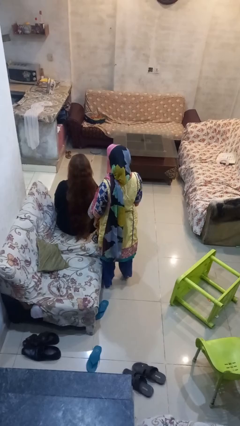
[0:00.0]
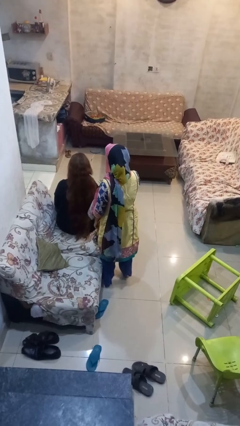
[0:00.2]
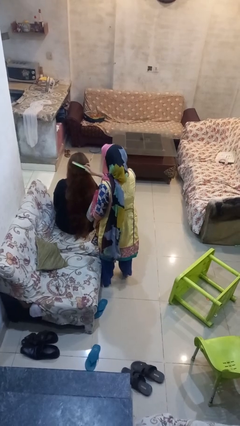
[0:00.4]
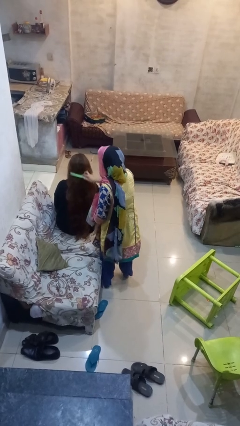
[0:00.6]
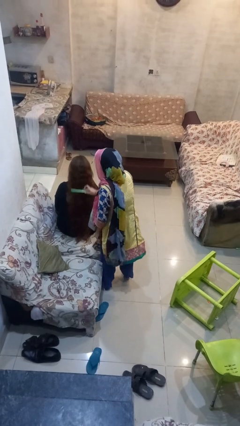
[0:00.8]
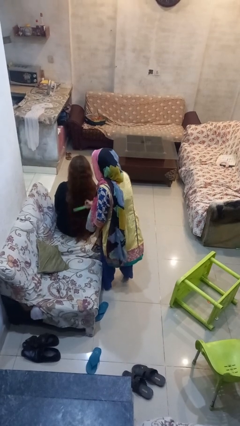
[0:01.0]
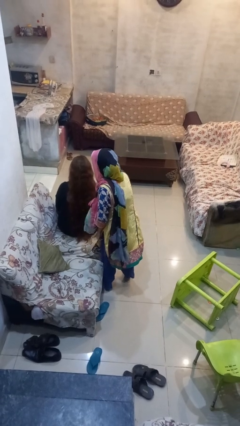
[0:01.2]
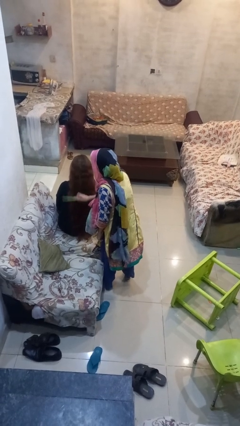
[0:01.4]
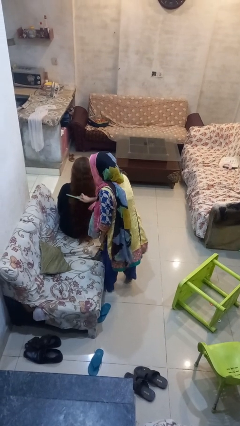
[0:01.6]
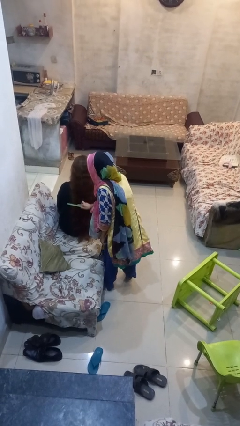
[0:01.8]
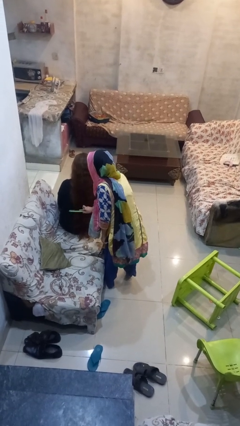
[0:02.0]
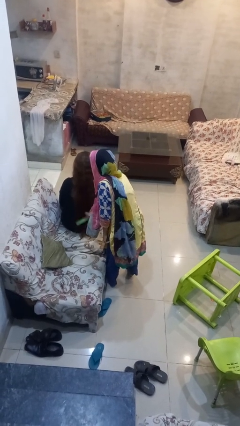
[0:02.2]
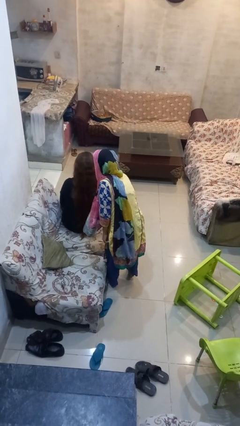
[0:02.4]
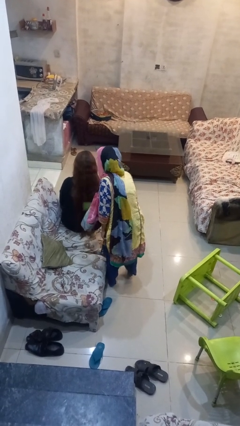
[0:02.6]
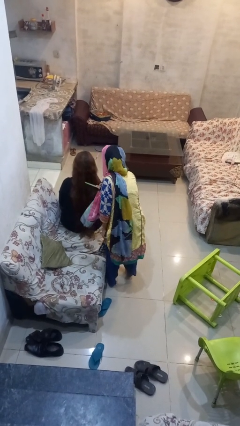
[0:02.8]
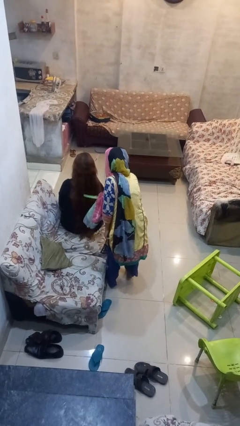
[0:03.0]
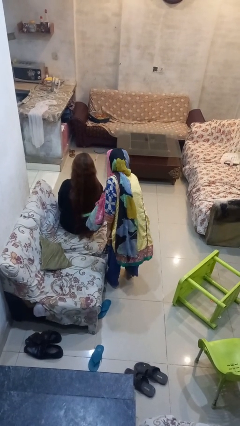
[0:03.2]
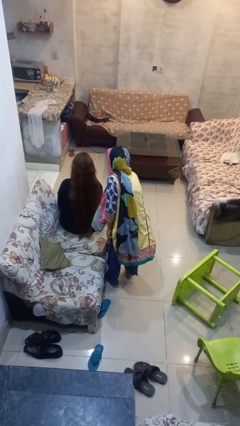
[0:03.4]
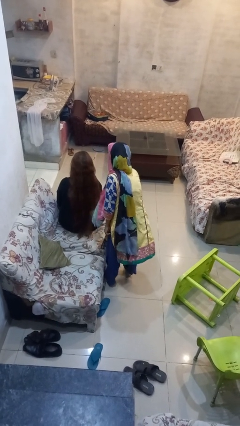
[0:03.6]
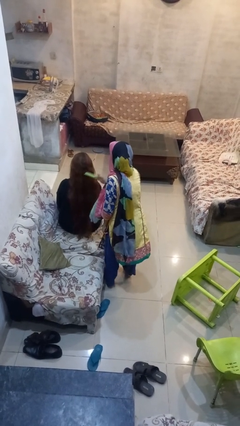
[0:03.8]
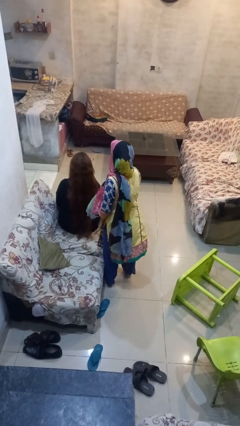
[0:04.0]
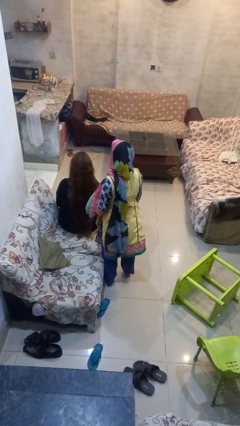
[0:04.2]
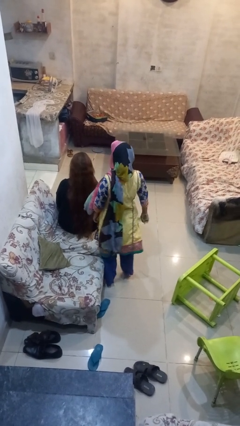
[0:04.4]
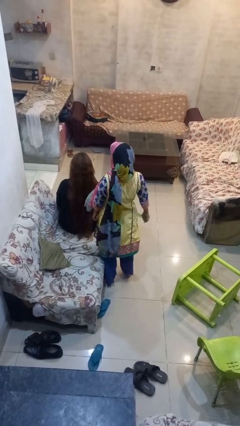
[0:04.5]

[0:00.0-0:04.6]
person brushes hair of person

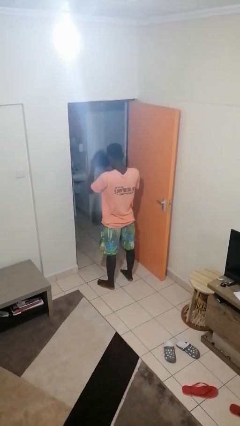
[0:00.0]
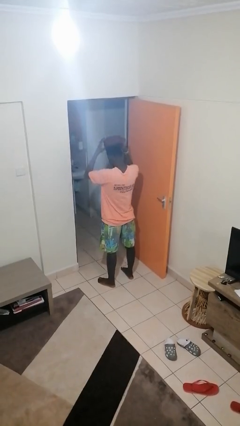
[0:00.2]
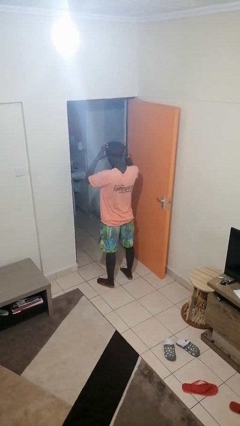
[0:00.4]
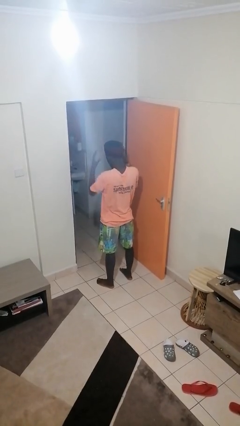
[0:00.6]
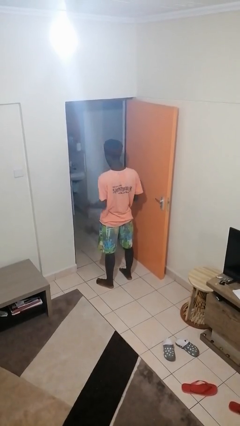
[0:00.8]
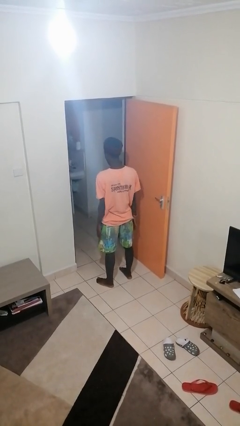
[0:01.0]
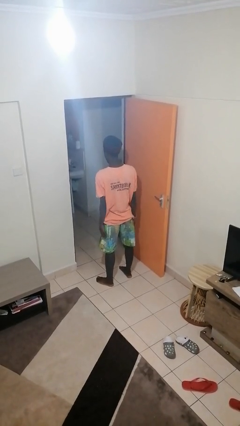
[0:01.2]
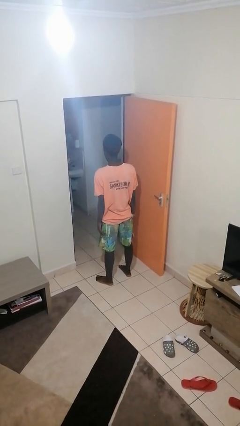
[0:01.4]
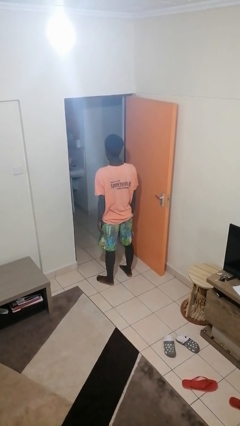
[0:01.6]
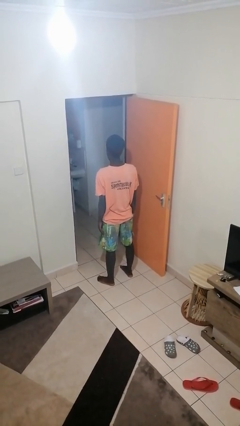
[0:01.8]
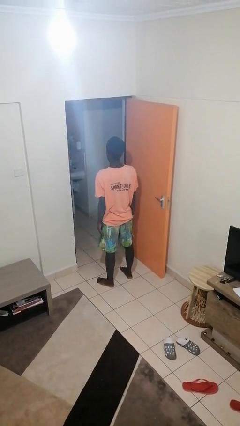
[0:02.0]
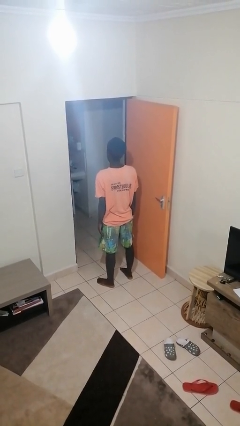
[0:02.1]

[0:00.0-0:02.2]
person puts on hat

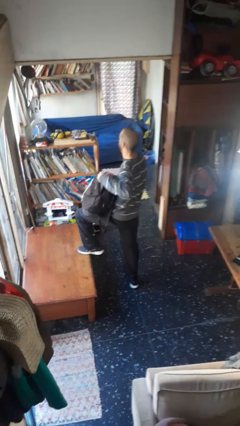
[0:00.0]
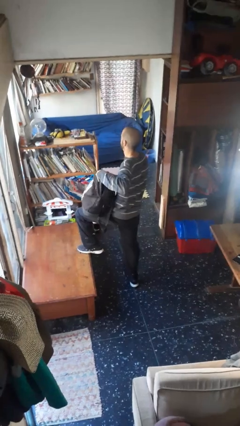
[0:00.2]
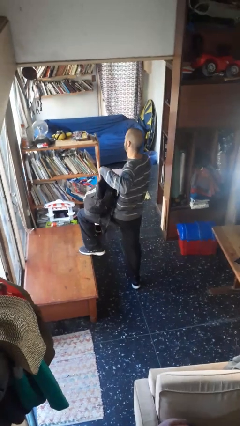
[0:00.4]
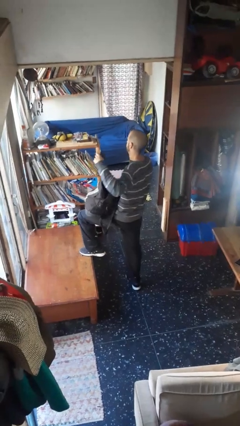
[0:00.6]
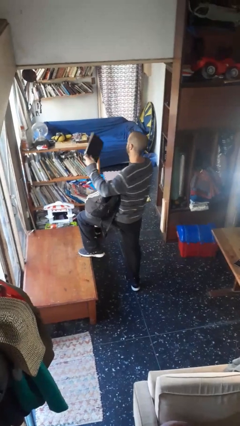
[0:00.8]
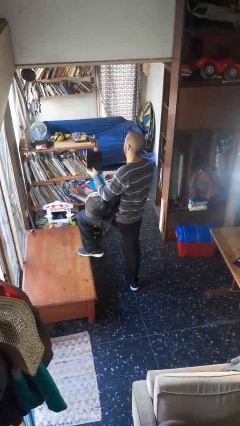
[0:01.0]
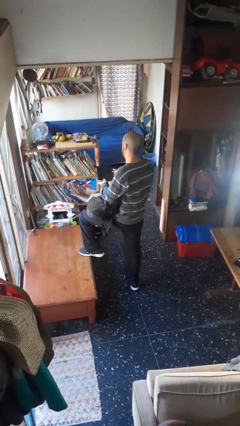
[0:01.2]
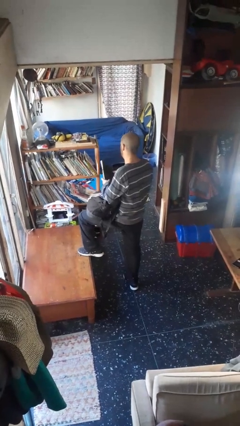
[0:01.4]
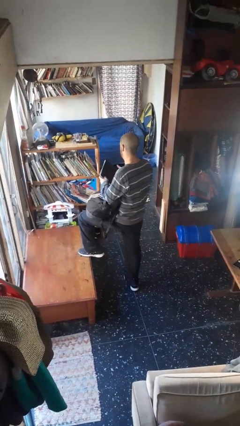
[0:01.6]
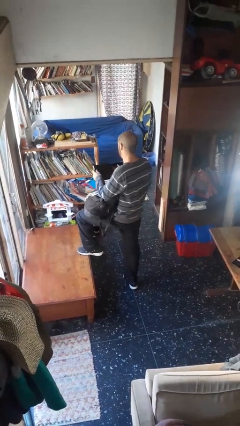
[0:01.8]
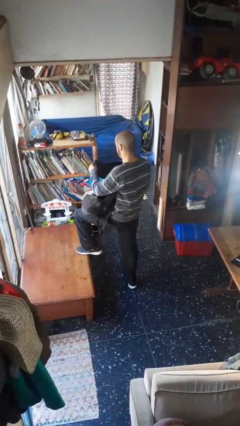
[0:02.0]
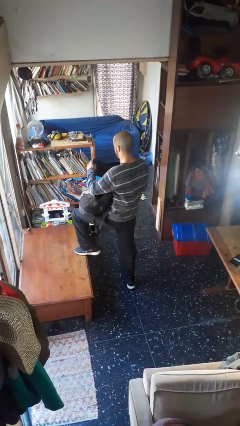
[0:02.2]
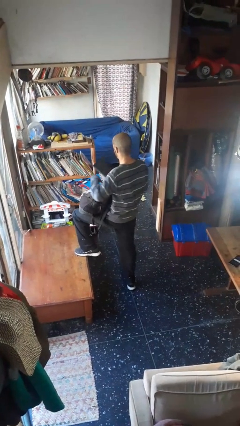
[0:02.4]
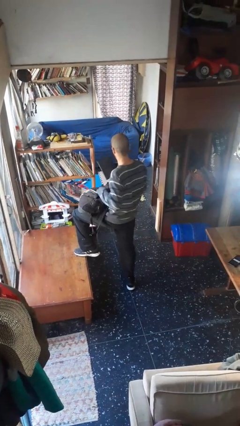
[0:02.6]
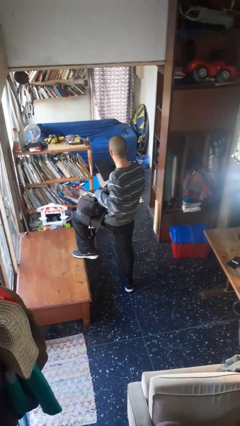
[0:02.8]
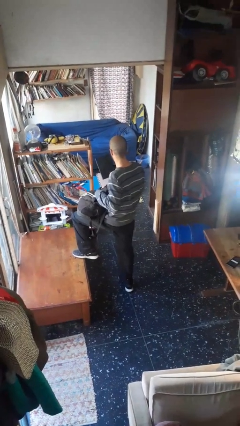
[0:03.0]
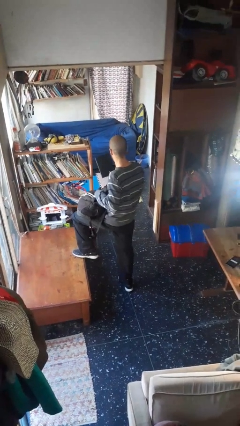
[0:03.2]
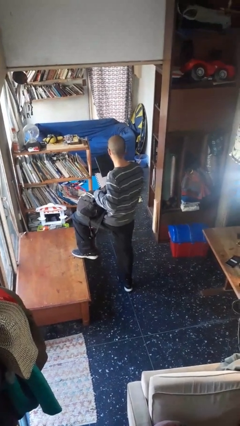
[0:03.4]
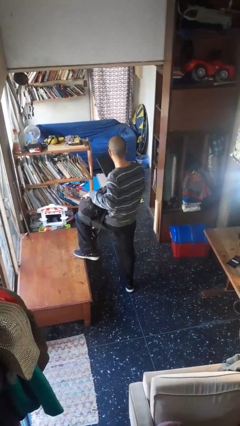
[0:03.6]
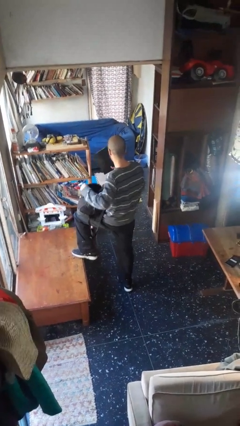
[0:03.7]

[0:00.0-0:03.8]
person takes object from backpack

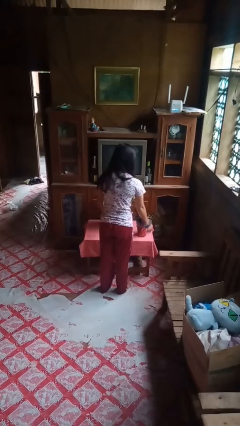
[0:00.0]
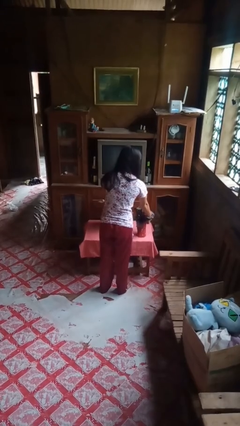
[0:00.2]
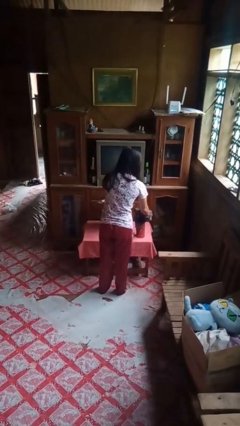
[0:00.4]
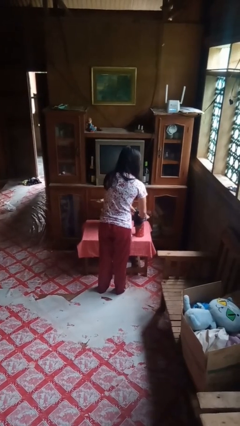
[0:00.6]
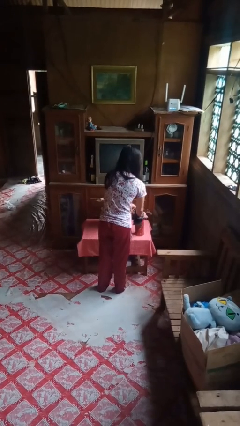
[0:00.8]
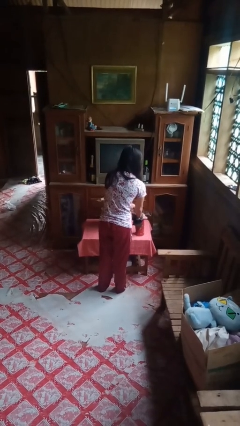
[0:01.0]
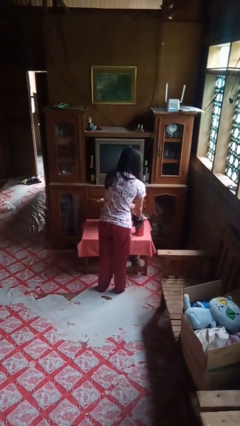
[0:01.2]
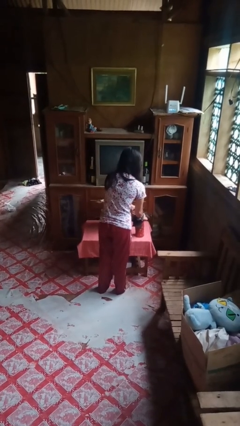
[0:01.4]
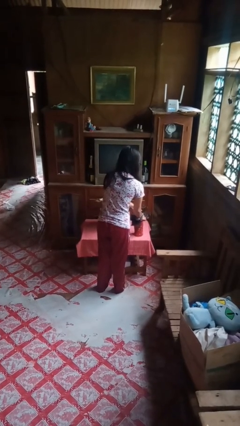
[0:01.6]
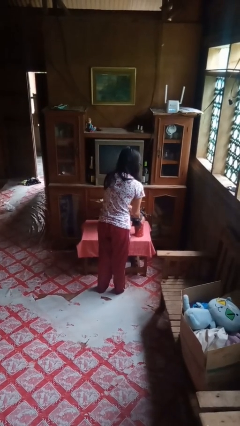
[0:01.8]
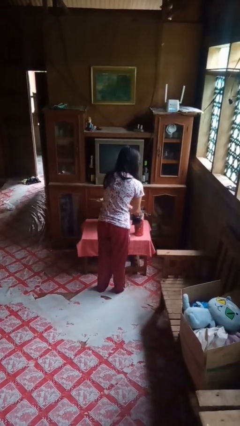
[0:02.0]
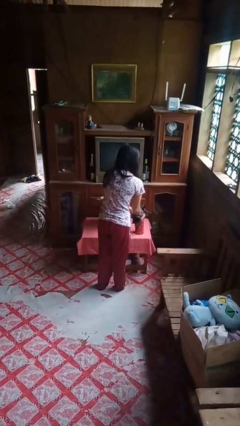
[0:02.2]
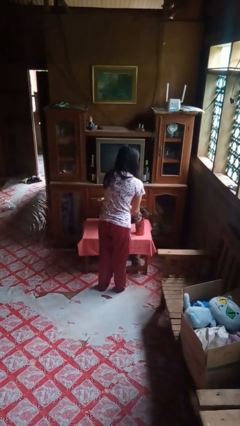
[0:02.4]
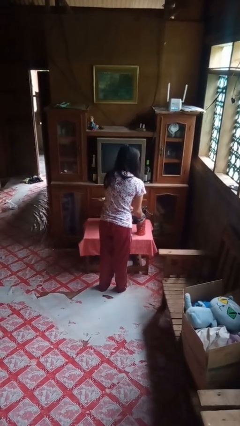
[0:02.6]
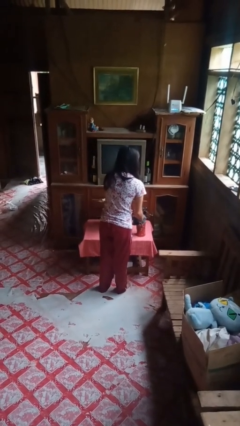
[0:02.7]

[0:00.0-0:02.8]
person arranges flowers in vase

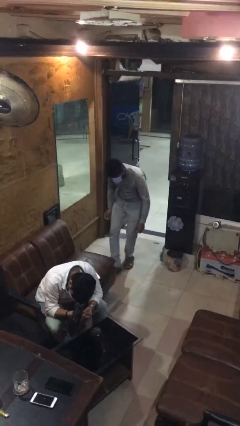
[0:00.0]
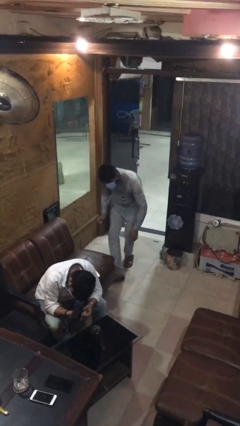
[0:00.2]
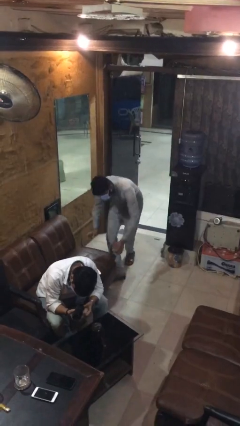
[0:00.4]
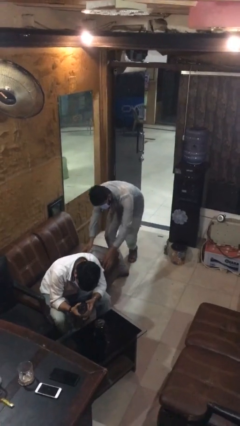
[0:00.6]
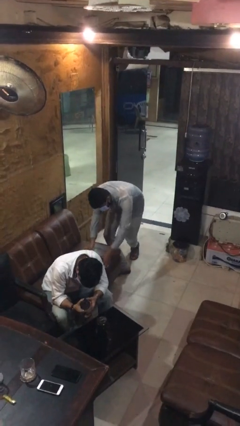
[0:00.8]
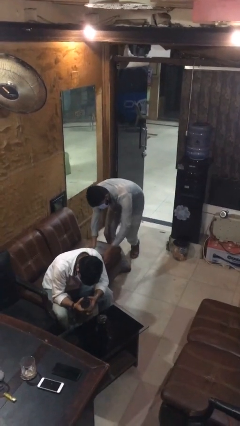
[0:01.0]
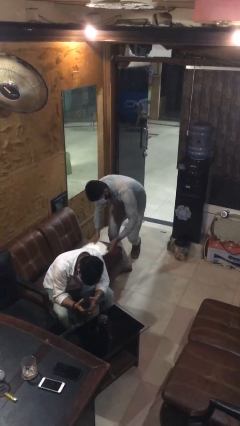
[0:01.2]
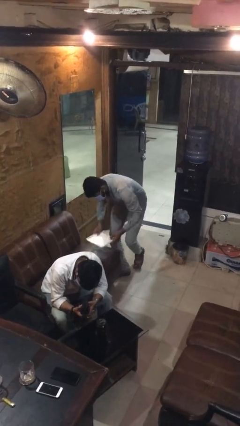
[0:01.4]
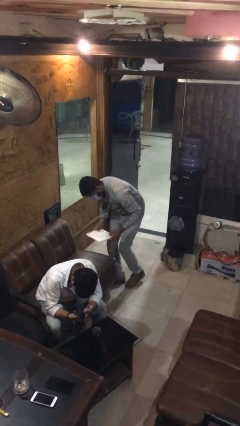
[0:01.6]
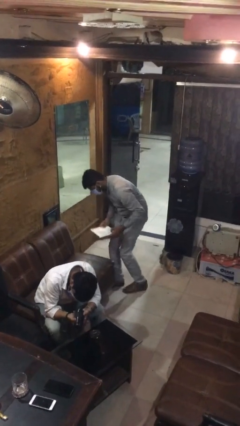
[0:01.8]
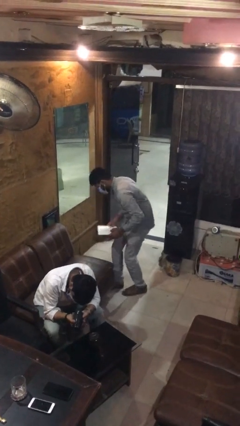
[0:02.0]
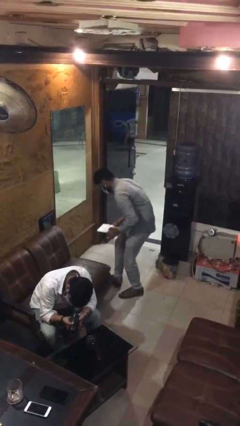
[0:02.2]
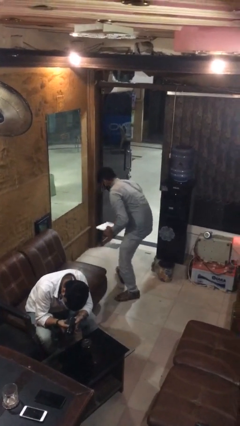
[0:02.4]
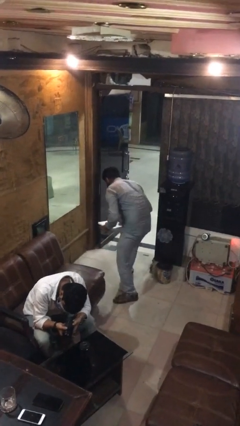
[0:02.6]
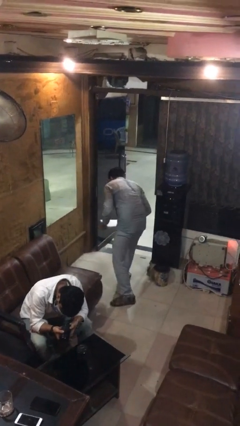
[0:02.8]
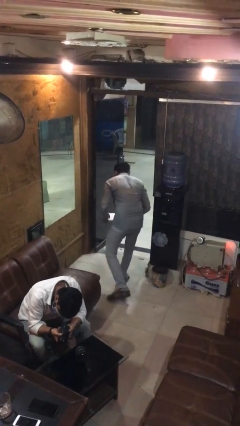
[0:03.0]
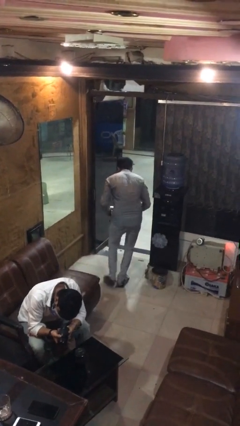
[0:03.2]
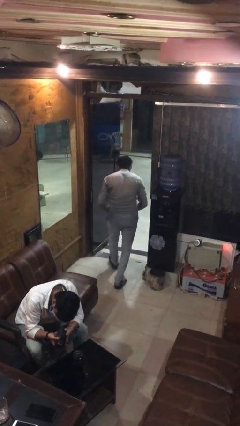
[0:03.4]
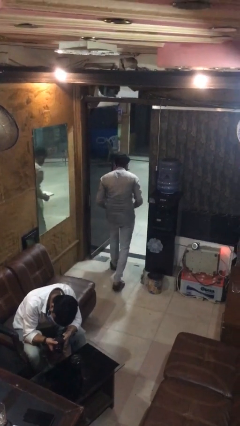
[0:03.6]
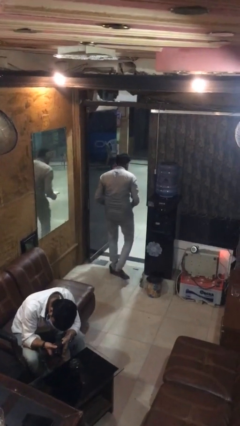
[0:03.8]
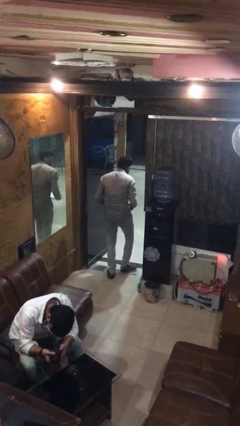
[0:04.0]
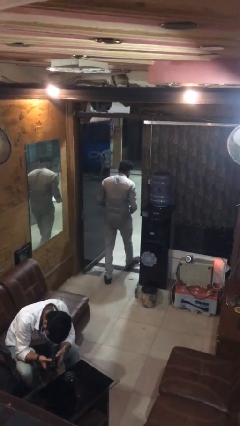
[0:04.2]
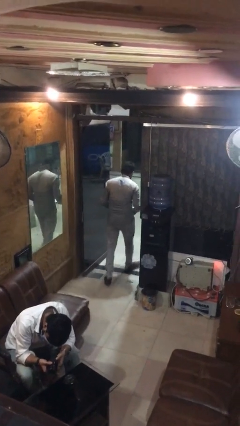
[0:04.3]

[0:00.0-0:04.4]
person steals object from person
